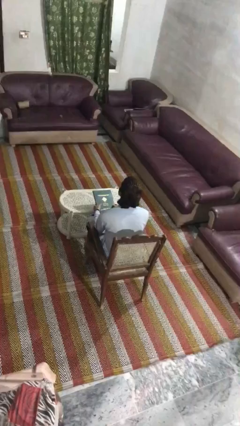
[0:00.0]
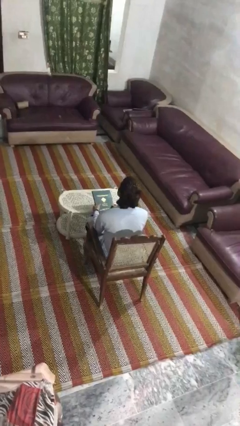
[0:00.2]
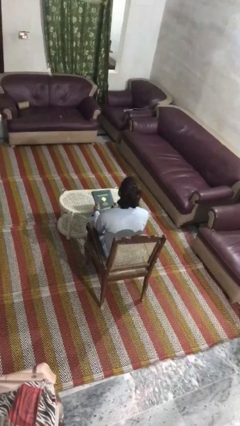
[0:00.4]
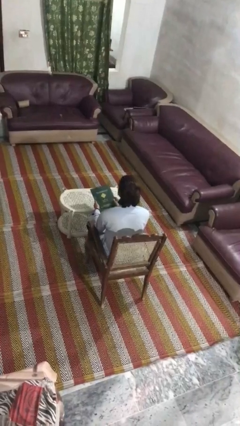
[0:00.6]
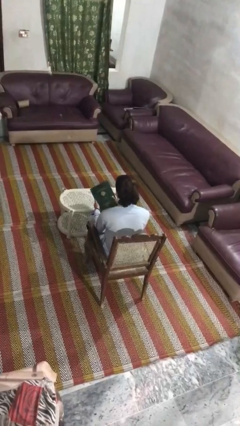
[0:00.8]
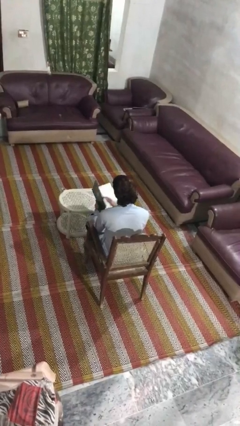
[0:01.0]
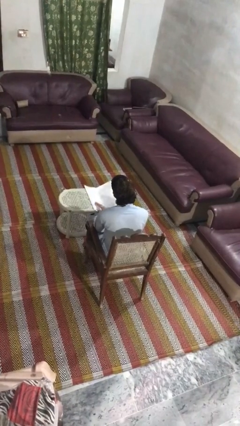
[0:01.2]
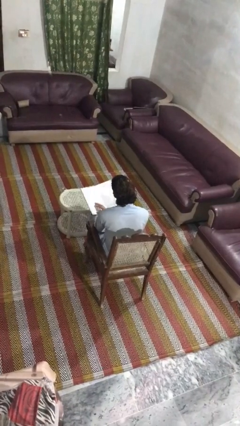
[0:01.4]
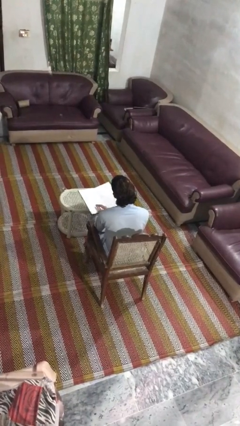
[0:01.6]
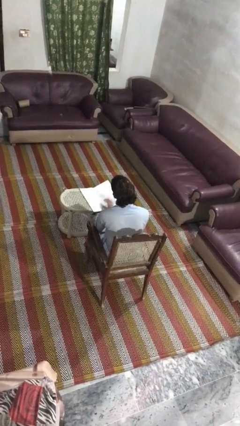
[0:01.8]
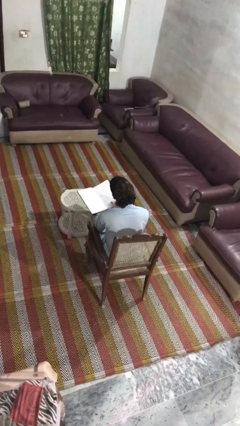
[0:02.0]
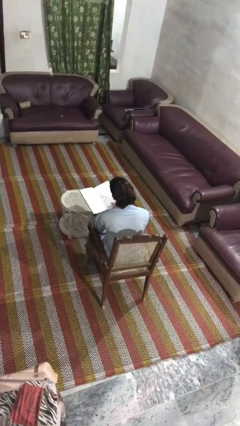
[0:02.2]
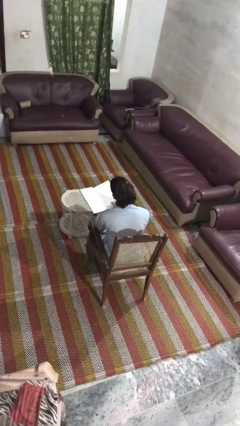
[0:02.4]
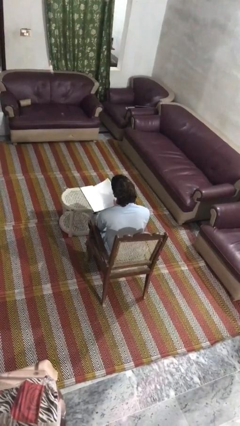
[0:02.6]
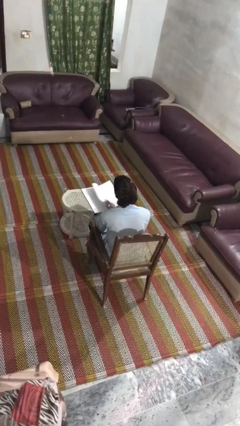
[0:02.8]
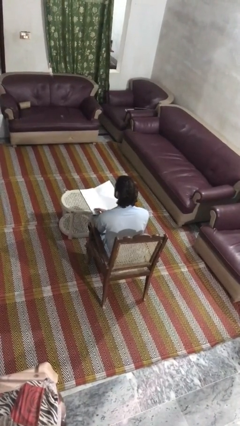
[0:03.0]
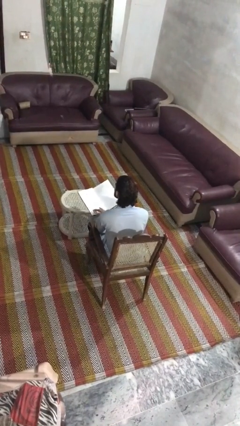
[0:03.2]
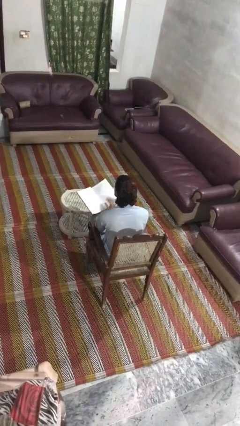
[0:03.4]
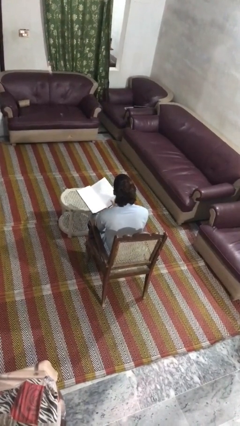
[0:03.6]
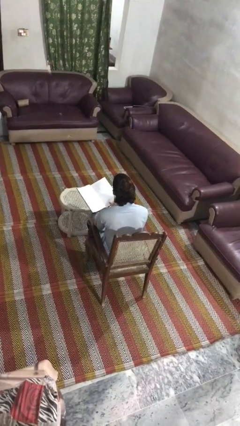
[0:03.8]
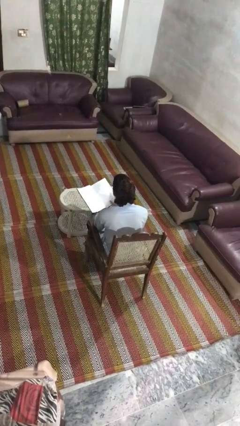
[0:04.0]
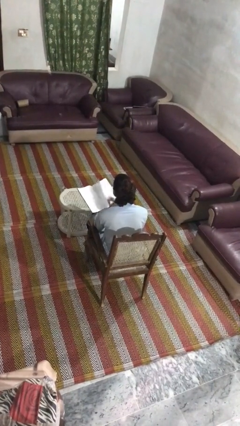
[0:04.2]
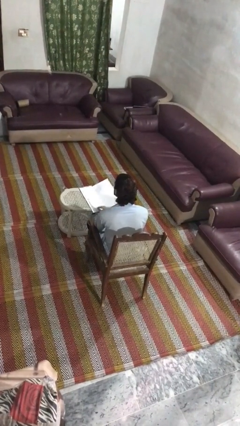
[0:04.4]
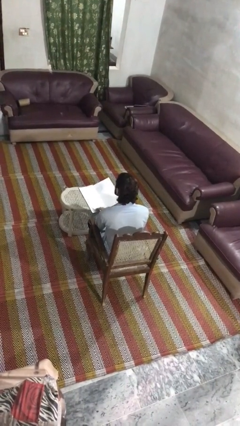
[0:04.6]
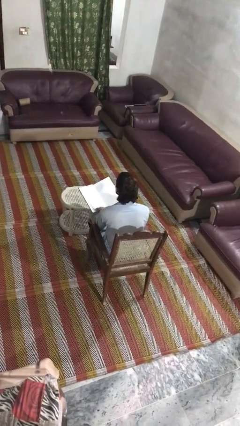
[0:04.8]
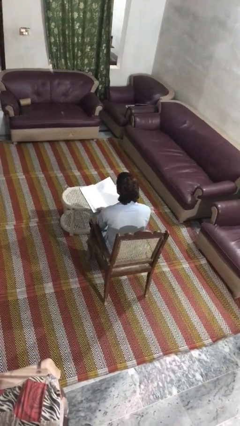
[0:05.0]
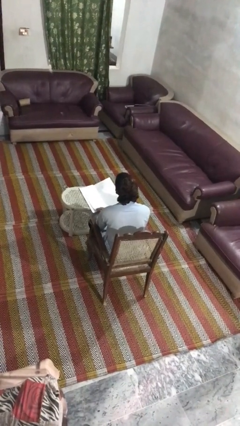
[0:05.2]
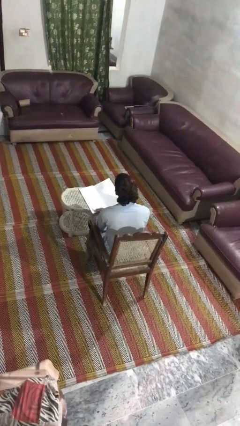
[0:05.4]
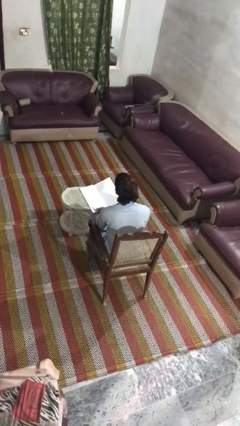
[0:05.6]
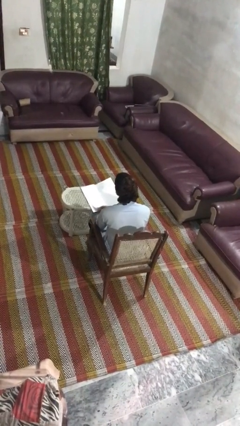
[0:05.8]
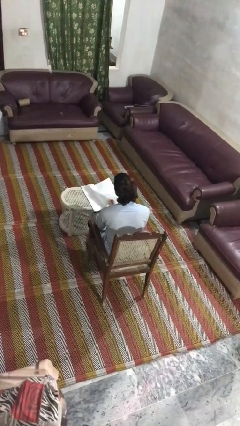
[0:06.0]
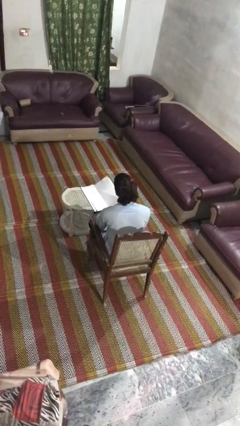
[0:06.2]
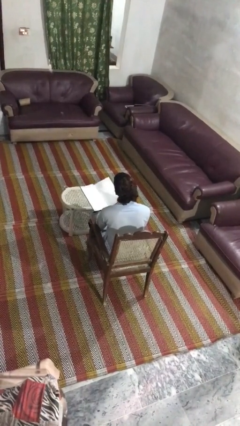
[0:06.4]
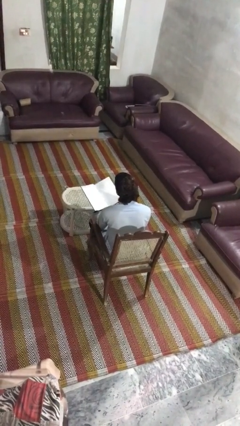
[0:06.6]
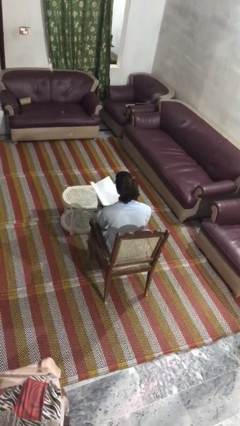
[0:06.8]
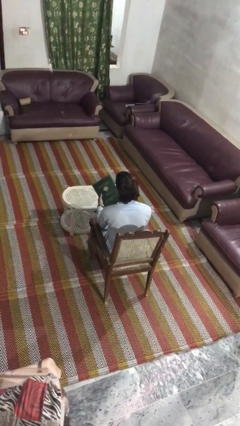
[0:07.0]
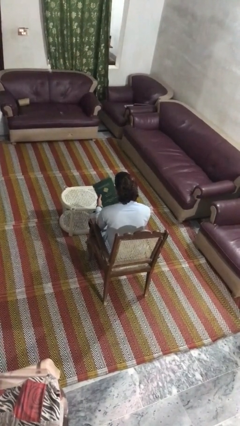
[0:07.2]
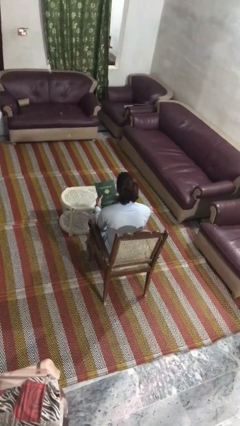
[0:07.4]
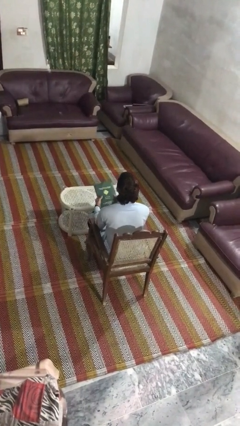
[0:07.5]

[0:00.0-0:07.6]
person reads book

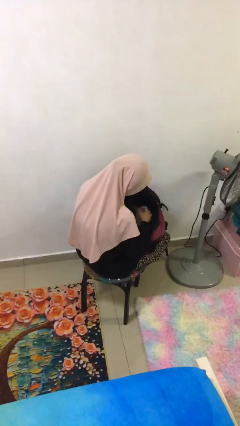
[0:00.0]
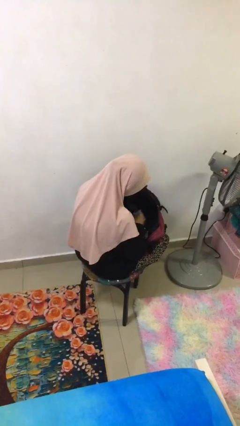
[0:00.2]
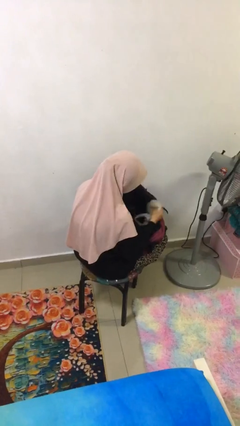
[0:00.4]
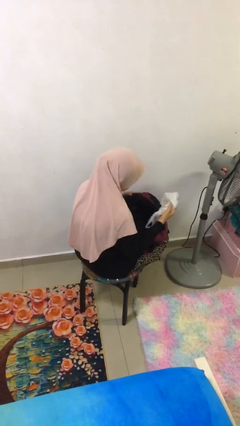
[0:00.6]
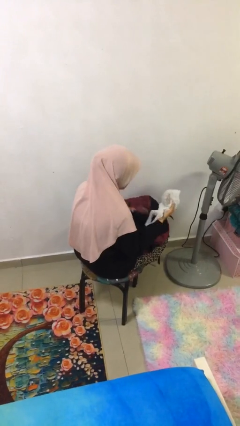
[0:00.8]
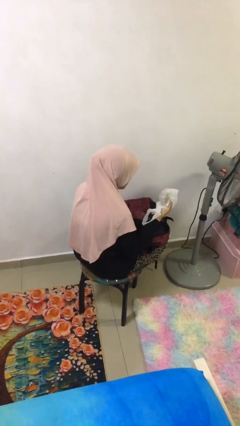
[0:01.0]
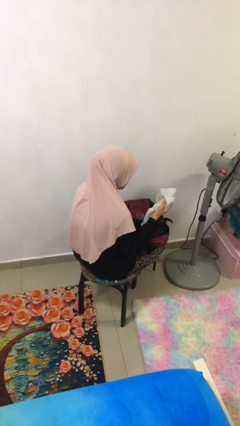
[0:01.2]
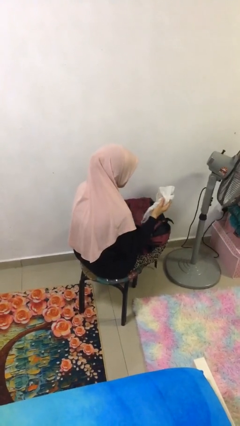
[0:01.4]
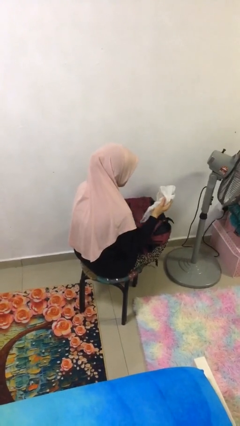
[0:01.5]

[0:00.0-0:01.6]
person takes object from backpack

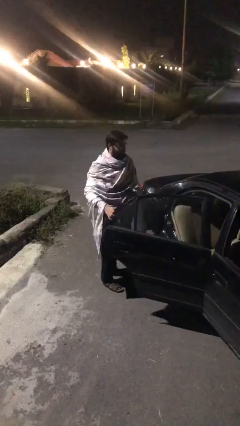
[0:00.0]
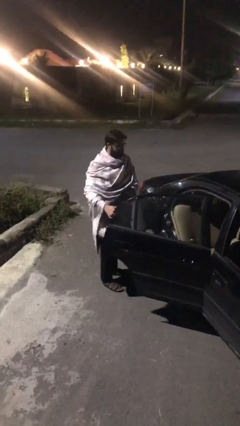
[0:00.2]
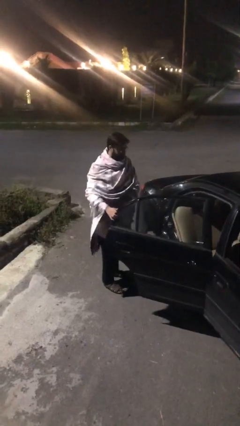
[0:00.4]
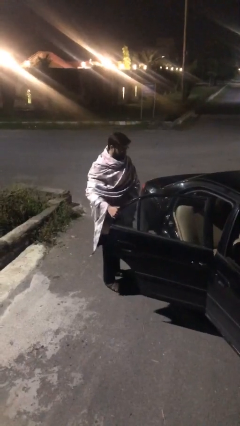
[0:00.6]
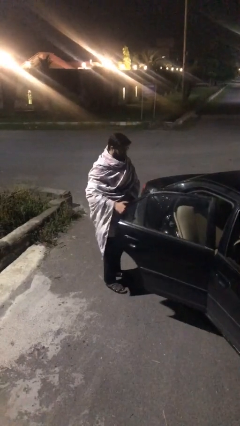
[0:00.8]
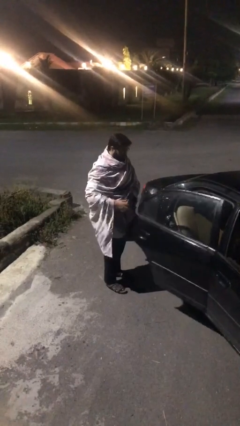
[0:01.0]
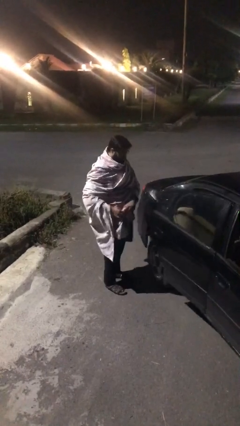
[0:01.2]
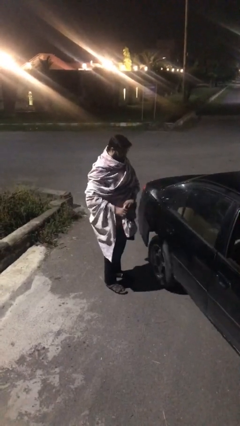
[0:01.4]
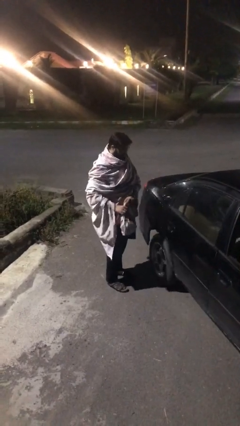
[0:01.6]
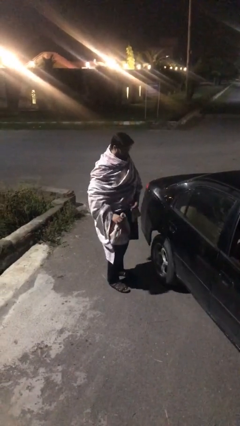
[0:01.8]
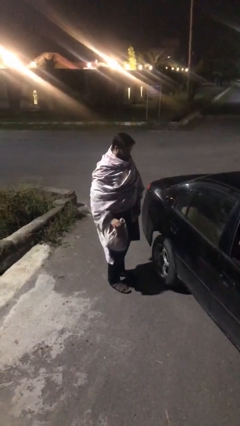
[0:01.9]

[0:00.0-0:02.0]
person closes car door

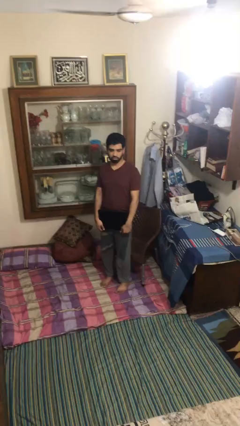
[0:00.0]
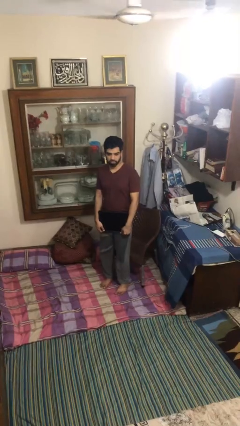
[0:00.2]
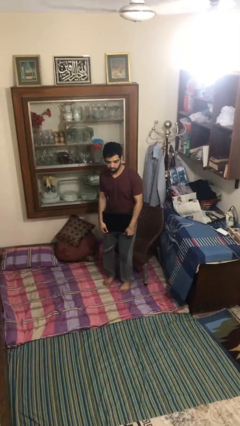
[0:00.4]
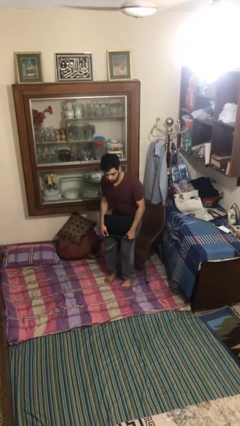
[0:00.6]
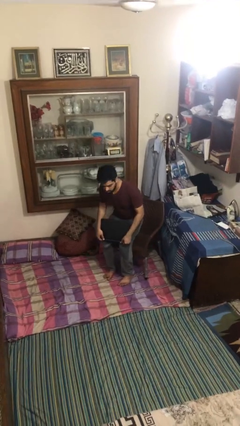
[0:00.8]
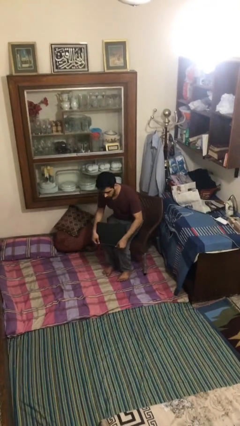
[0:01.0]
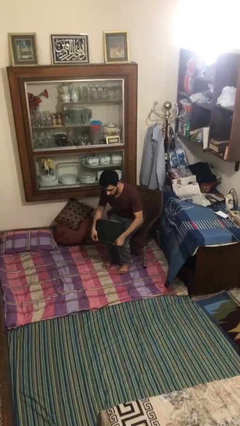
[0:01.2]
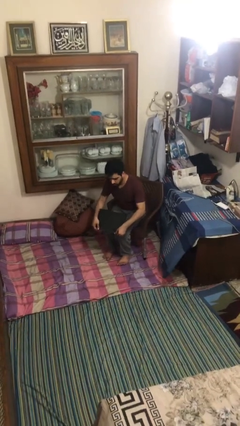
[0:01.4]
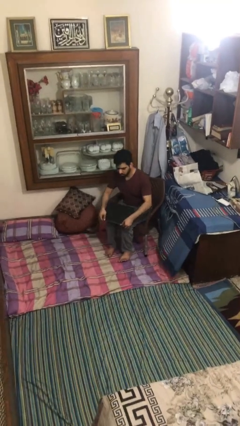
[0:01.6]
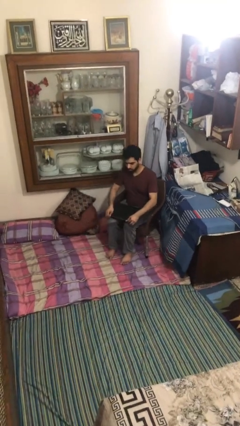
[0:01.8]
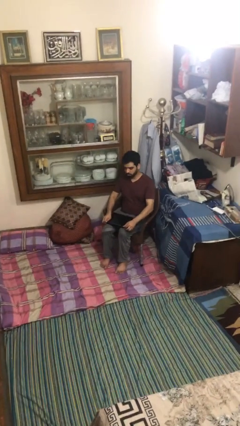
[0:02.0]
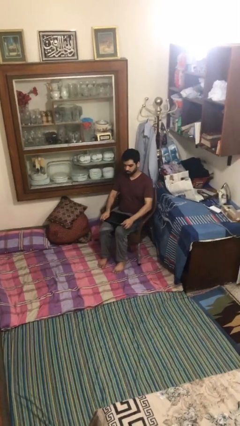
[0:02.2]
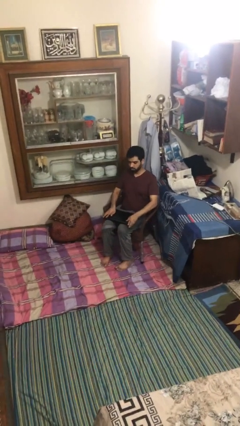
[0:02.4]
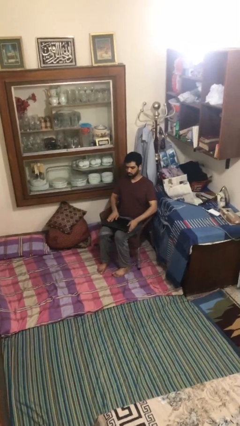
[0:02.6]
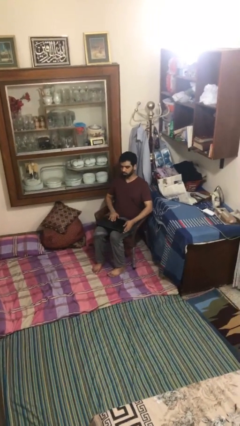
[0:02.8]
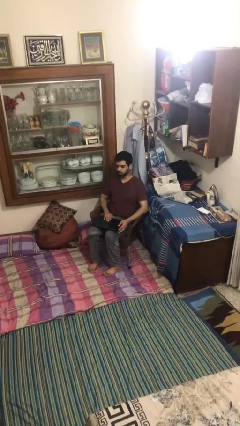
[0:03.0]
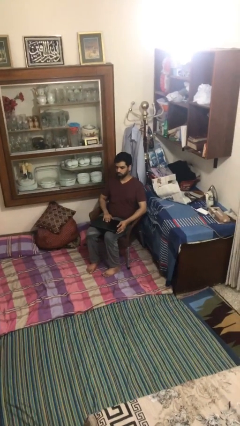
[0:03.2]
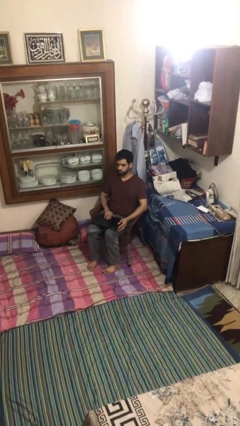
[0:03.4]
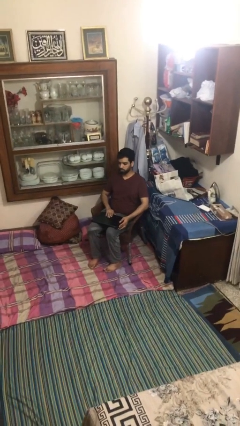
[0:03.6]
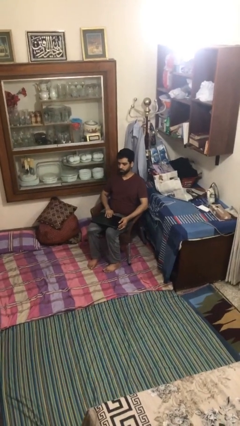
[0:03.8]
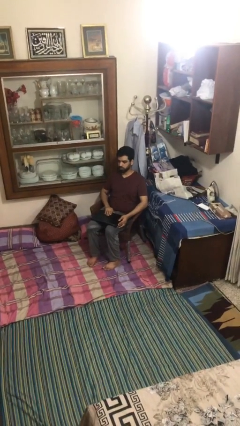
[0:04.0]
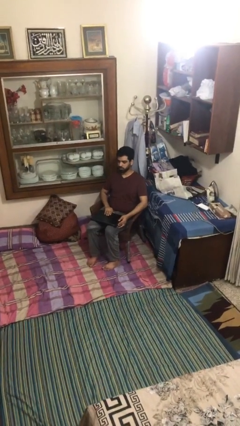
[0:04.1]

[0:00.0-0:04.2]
person sits down

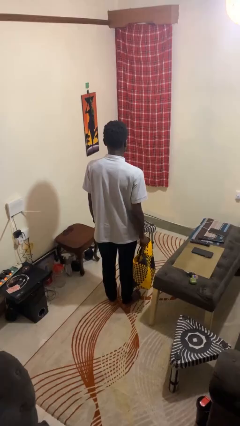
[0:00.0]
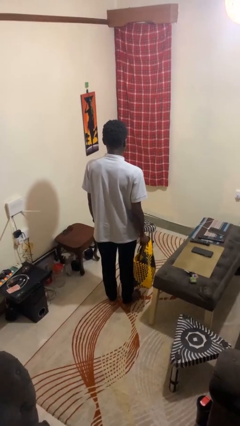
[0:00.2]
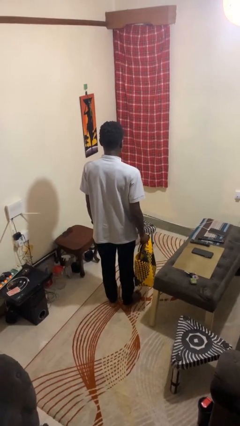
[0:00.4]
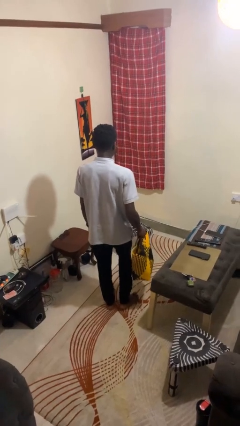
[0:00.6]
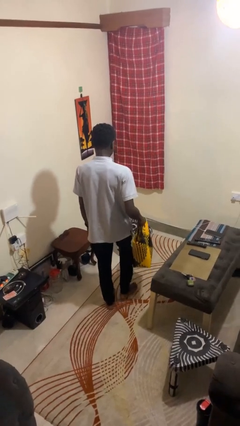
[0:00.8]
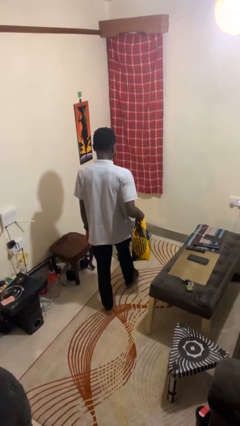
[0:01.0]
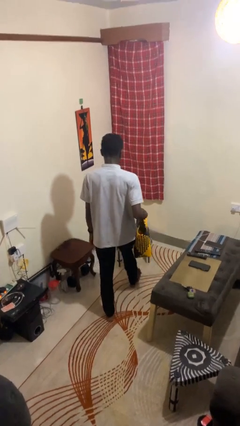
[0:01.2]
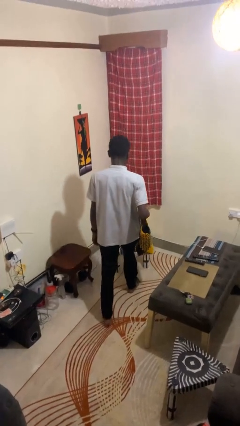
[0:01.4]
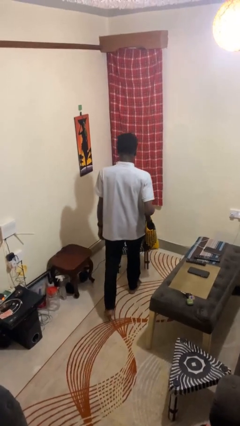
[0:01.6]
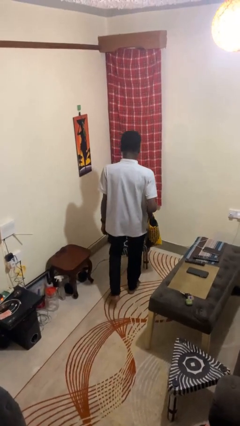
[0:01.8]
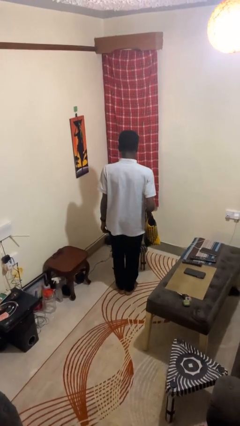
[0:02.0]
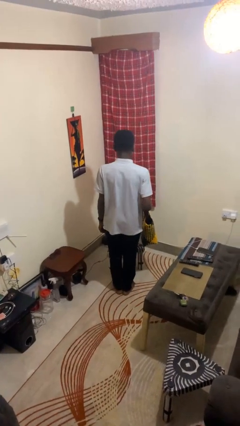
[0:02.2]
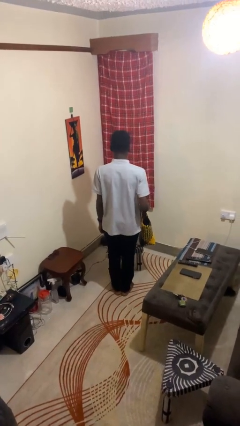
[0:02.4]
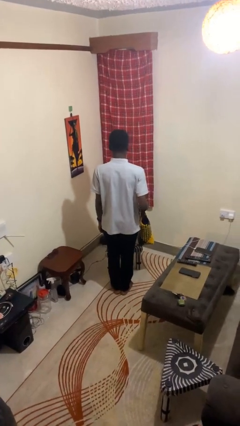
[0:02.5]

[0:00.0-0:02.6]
person carries groceries
